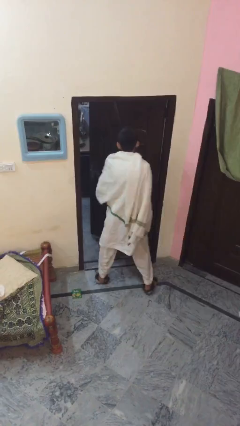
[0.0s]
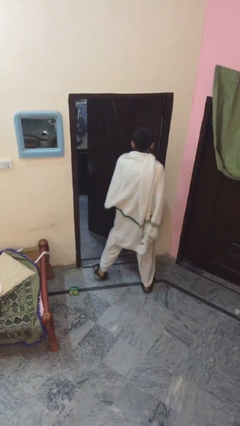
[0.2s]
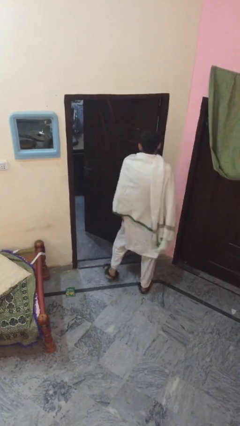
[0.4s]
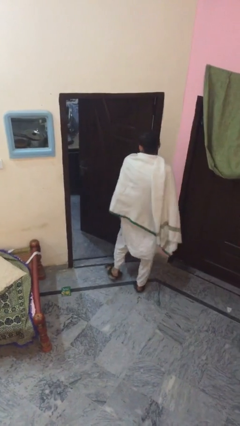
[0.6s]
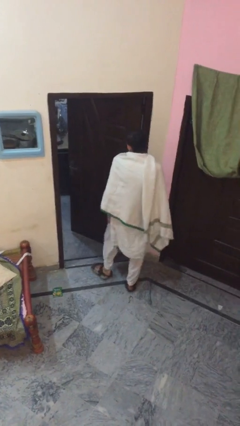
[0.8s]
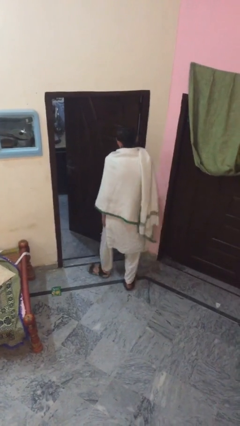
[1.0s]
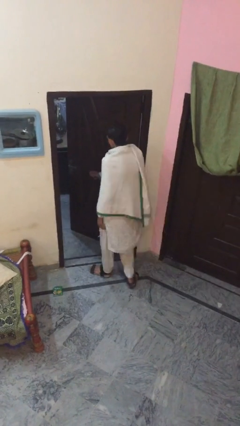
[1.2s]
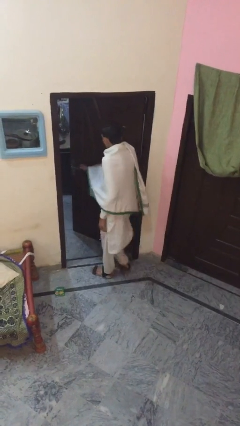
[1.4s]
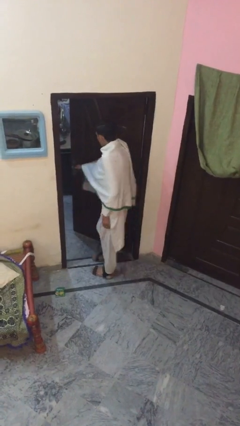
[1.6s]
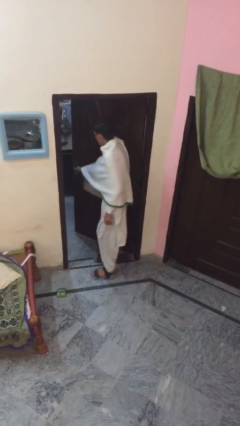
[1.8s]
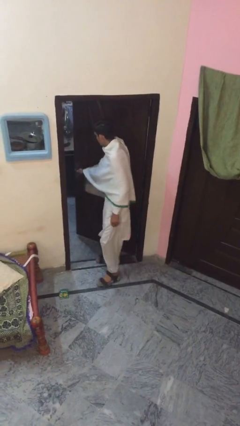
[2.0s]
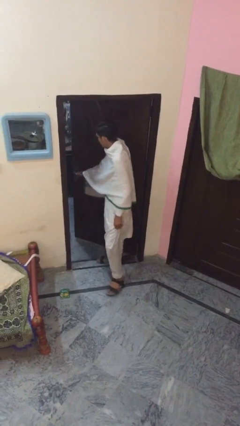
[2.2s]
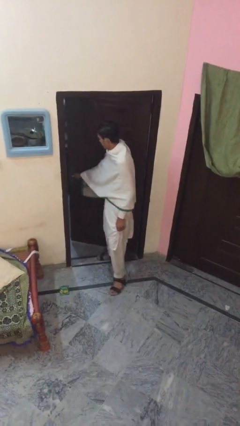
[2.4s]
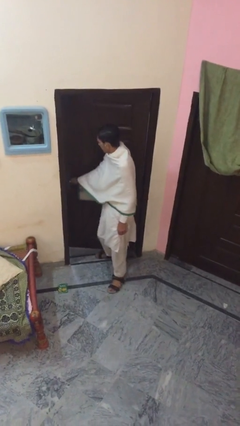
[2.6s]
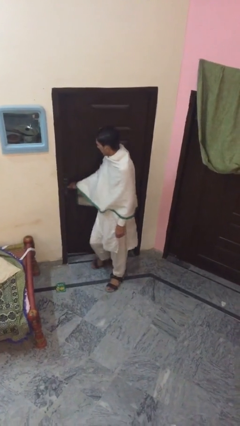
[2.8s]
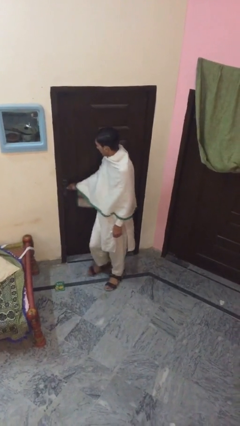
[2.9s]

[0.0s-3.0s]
person closes facility door

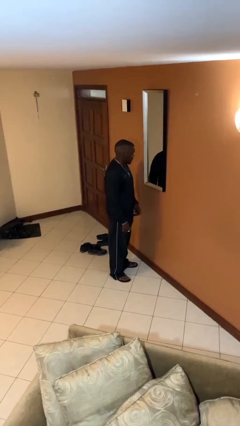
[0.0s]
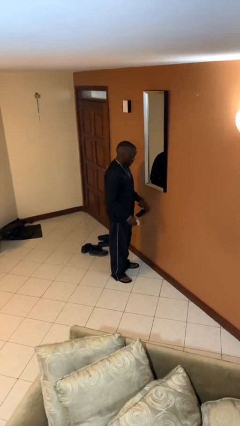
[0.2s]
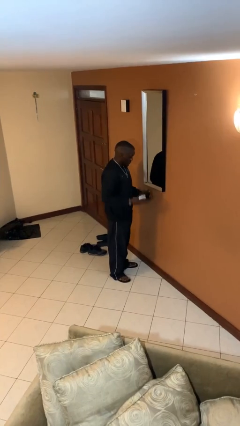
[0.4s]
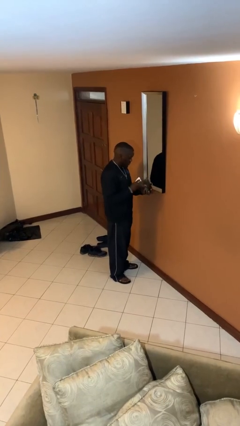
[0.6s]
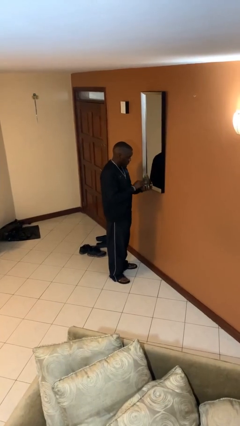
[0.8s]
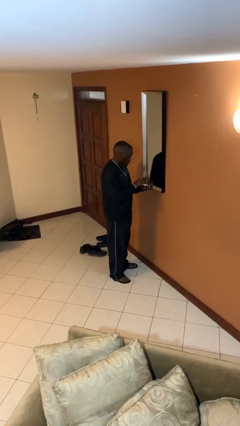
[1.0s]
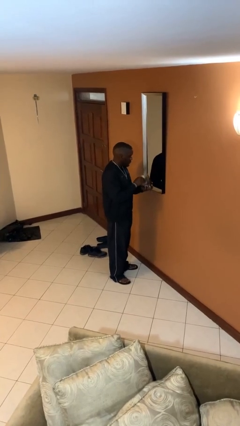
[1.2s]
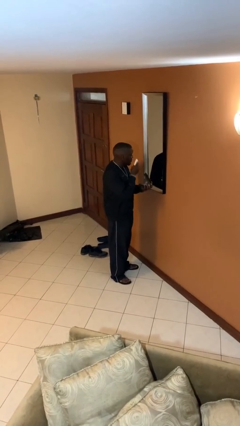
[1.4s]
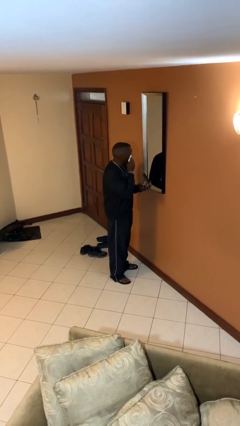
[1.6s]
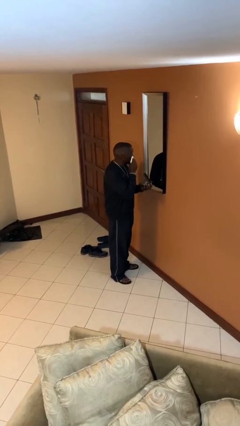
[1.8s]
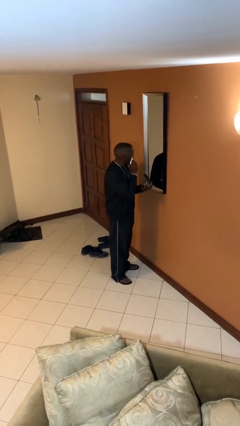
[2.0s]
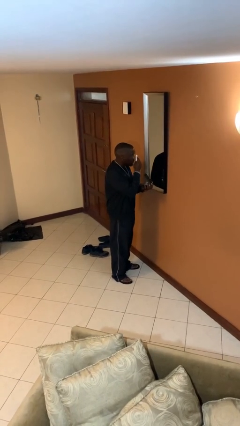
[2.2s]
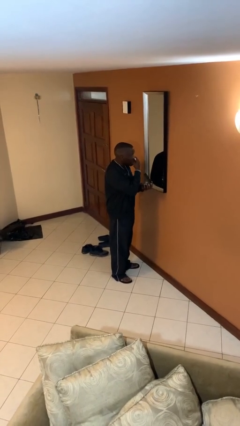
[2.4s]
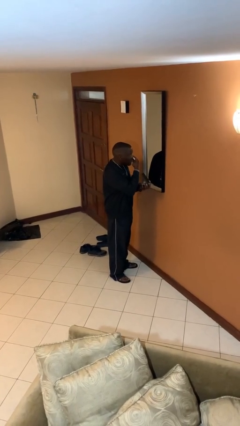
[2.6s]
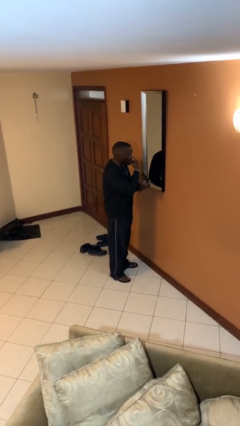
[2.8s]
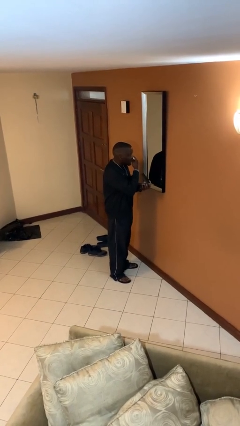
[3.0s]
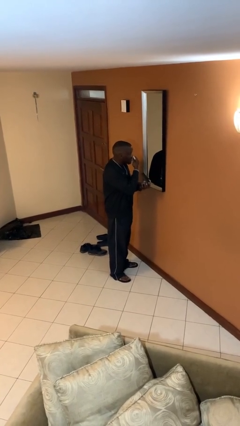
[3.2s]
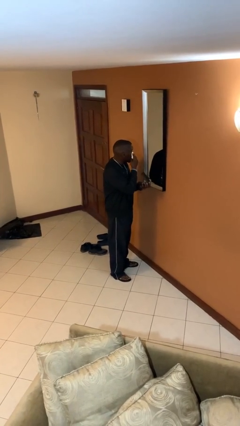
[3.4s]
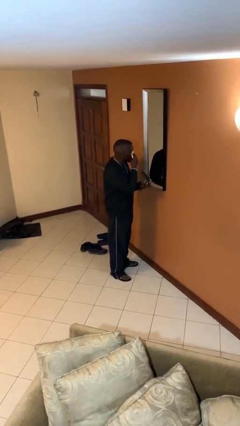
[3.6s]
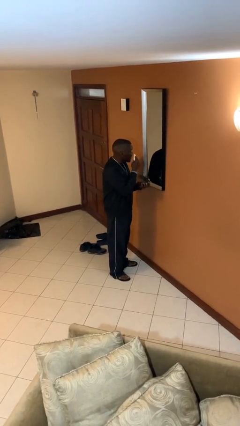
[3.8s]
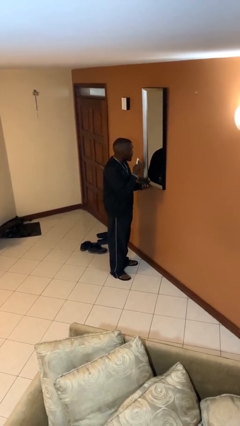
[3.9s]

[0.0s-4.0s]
person applies foundation makeup

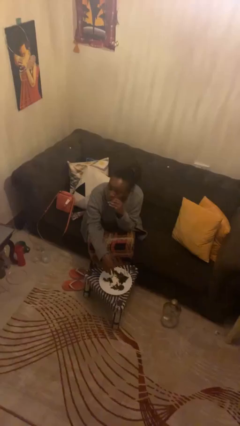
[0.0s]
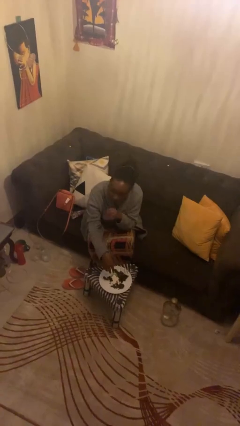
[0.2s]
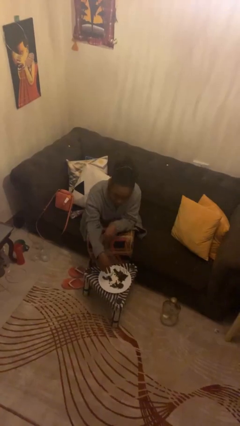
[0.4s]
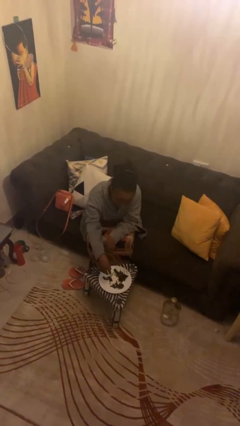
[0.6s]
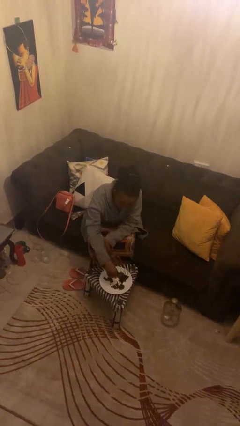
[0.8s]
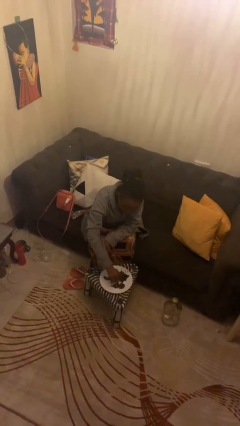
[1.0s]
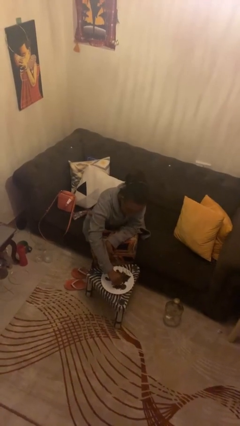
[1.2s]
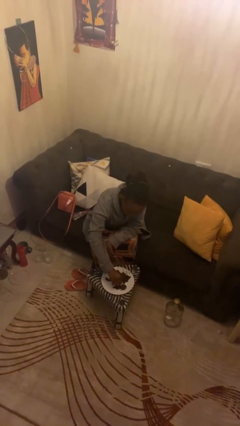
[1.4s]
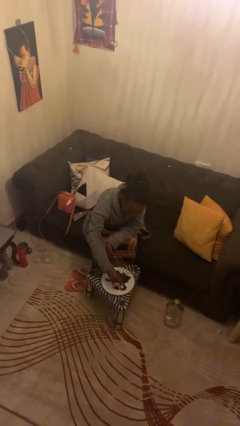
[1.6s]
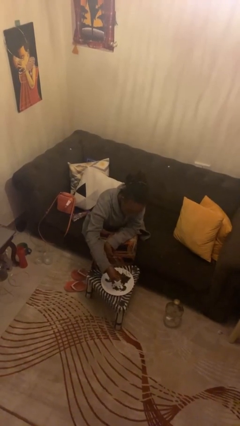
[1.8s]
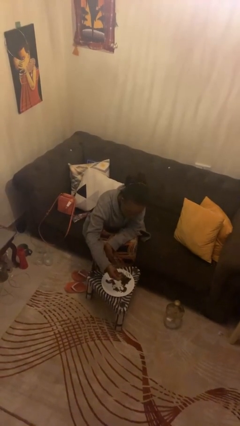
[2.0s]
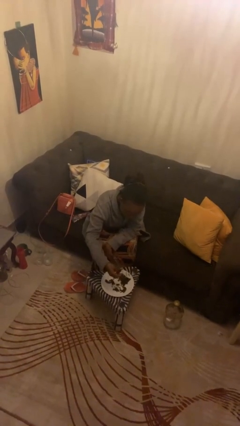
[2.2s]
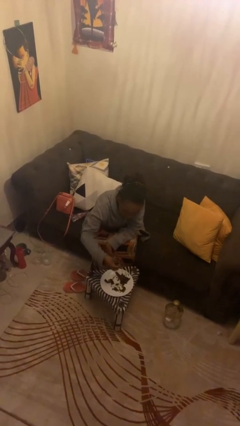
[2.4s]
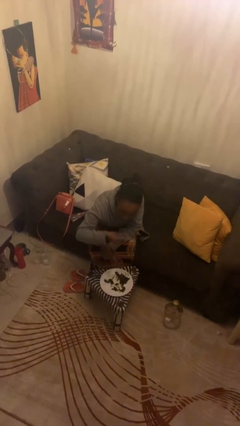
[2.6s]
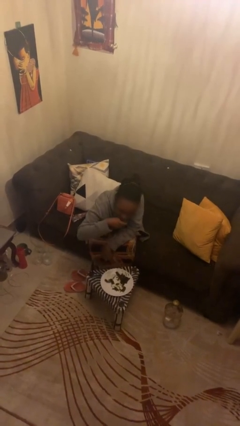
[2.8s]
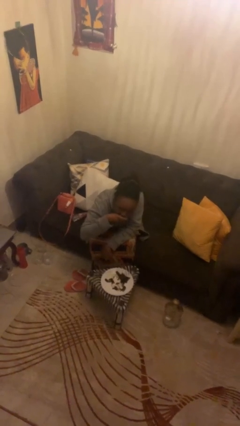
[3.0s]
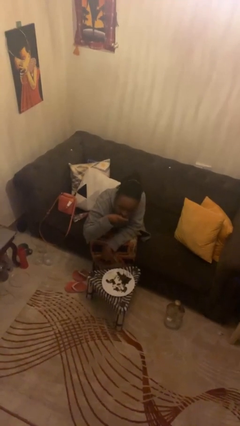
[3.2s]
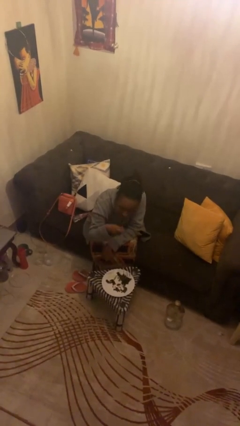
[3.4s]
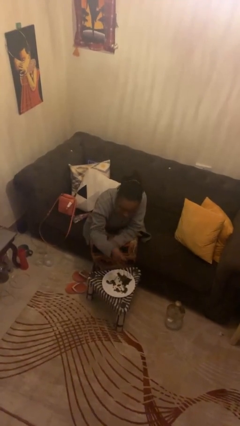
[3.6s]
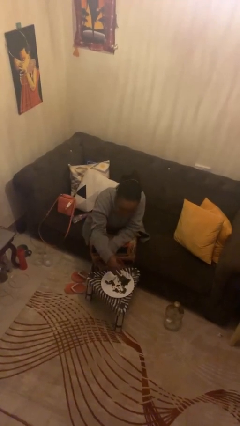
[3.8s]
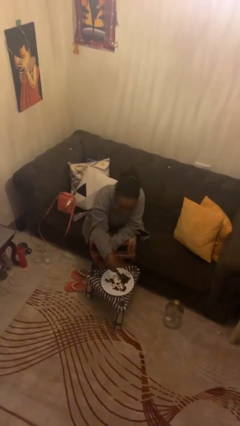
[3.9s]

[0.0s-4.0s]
person eats with hands

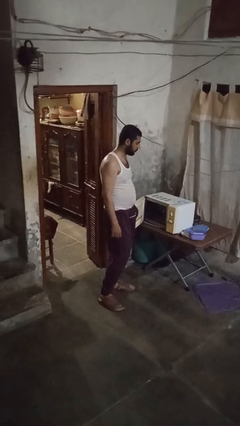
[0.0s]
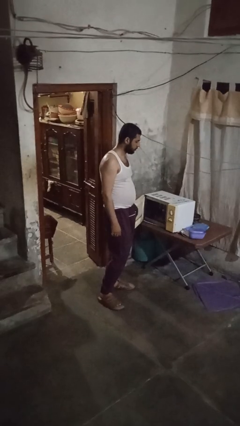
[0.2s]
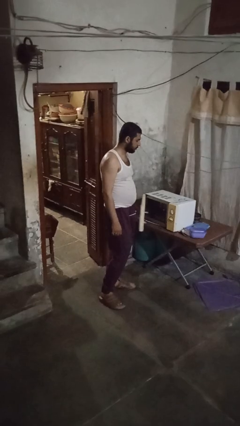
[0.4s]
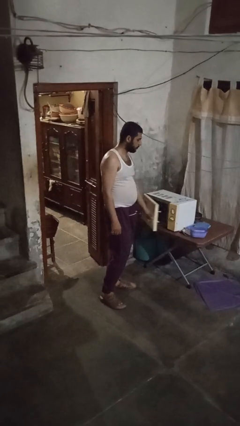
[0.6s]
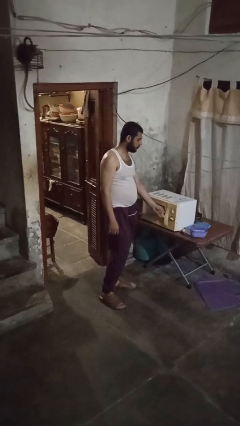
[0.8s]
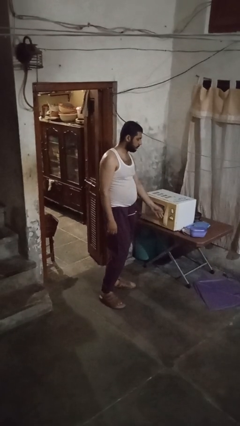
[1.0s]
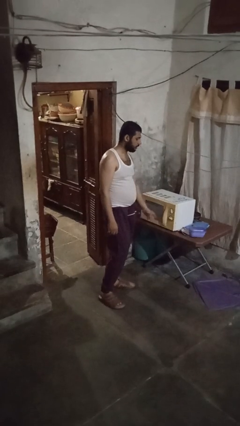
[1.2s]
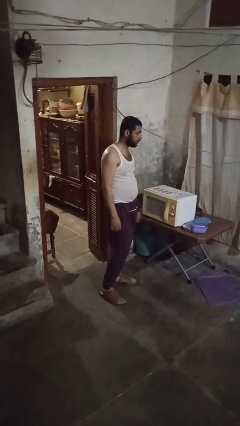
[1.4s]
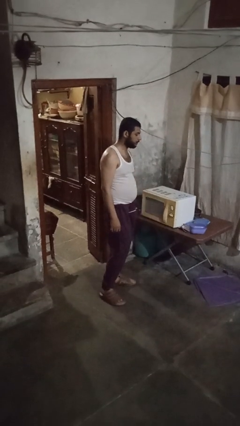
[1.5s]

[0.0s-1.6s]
person closes microwave

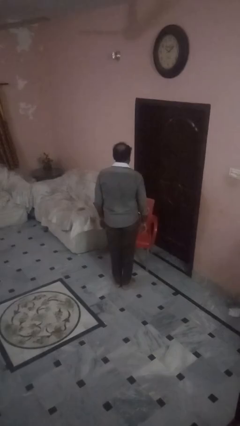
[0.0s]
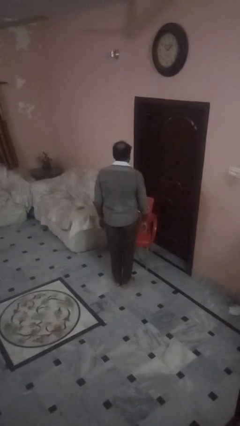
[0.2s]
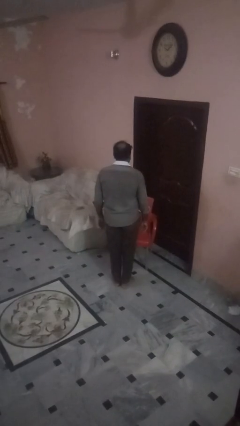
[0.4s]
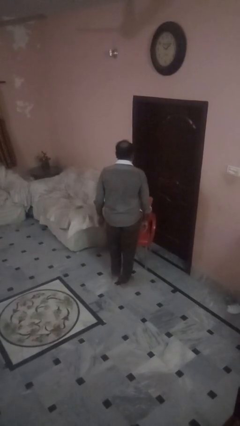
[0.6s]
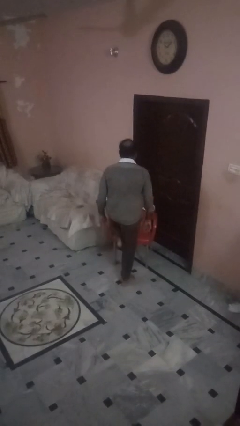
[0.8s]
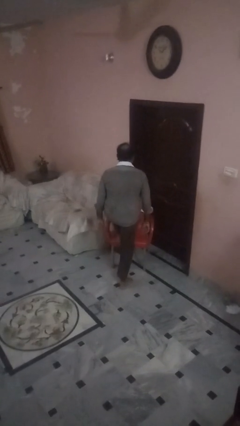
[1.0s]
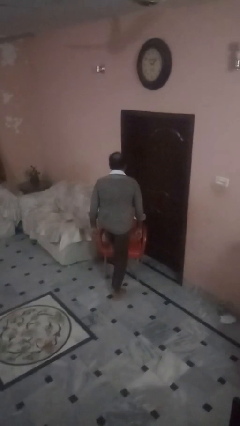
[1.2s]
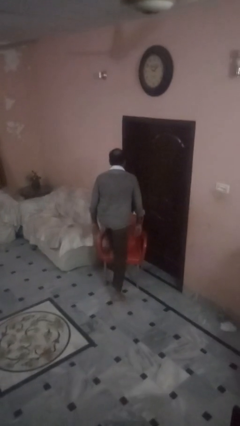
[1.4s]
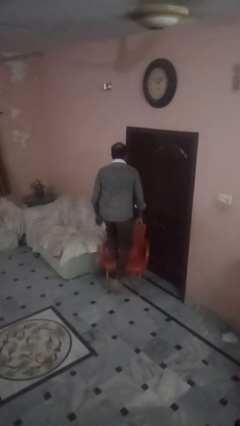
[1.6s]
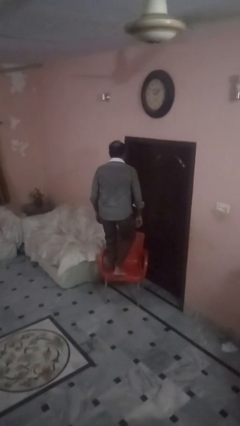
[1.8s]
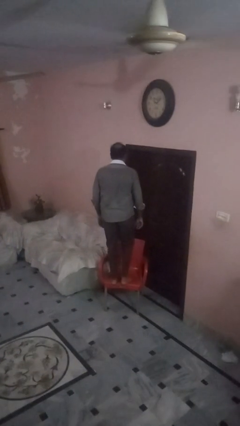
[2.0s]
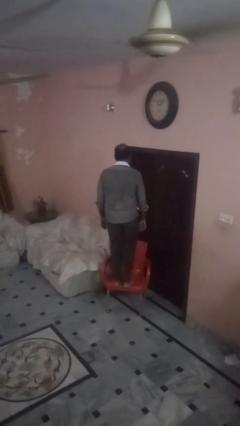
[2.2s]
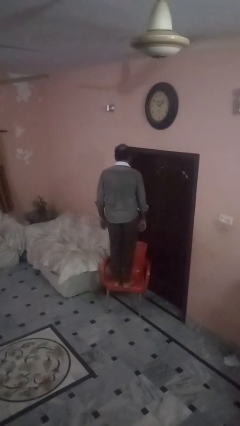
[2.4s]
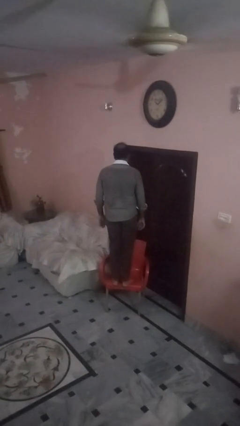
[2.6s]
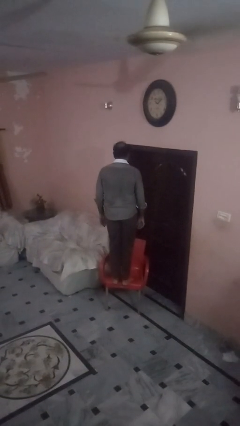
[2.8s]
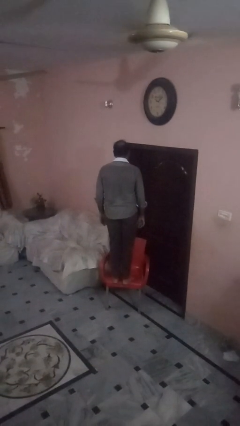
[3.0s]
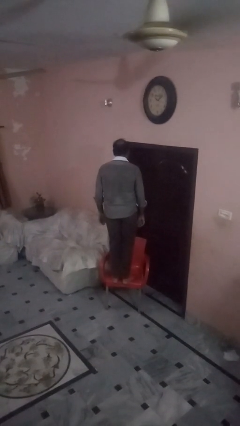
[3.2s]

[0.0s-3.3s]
person climbs on chair

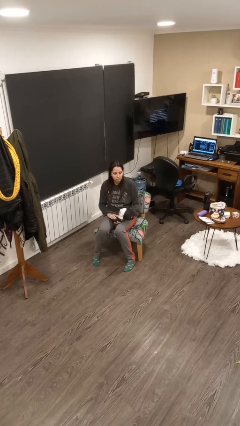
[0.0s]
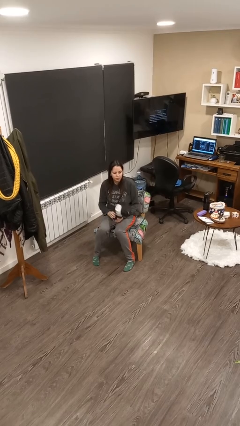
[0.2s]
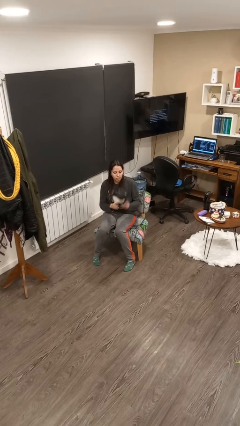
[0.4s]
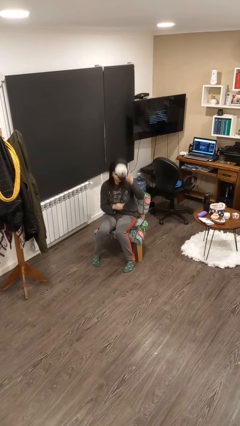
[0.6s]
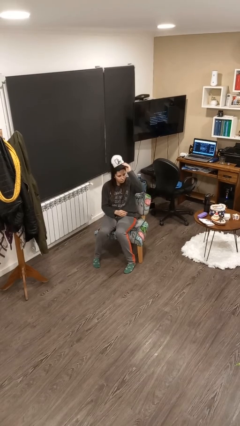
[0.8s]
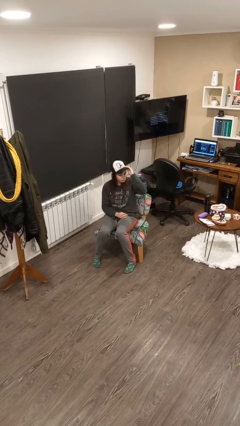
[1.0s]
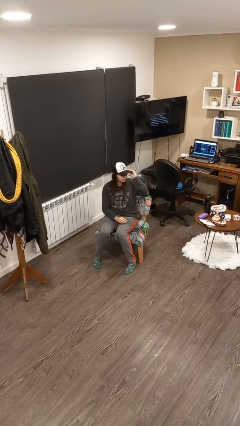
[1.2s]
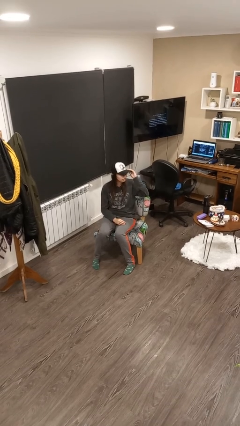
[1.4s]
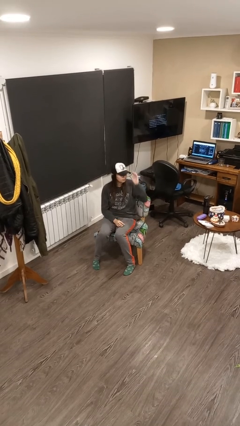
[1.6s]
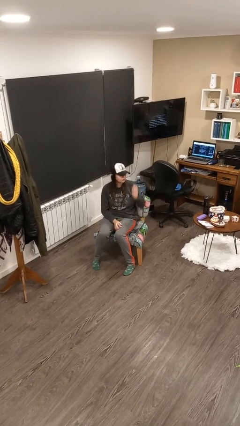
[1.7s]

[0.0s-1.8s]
person puts on hat
